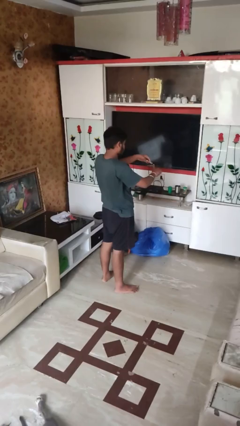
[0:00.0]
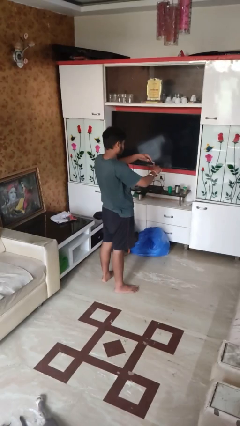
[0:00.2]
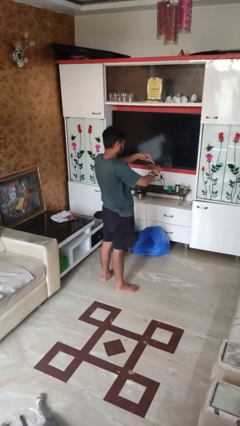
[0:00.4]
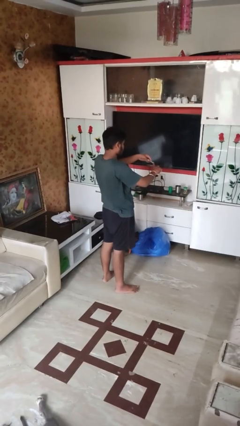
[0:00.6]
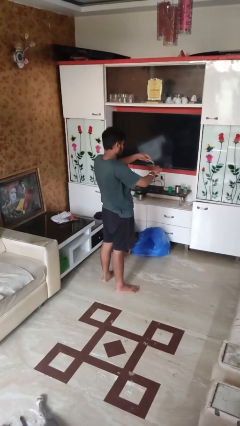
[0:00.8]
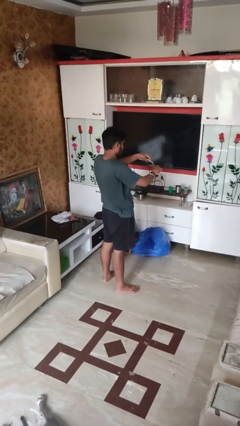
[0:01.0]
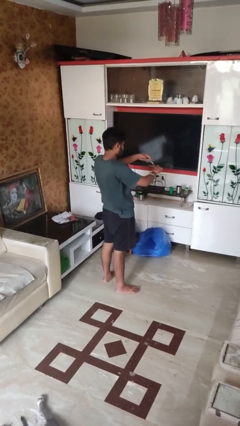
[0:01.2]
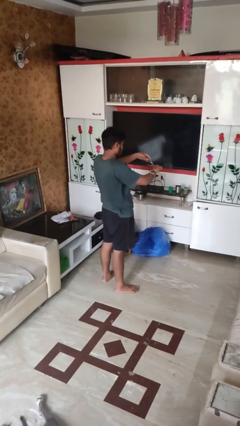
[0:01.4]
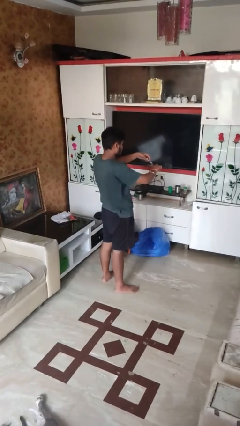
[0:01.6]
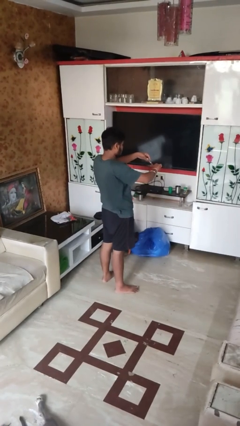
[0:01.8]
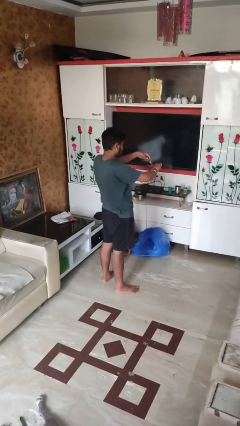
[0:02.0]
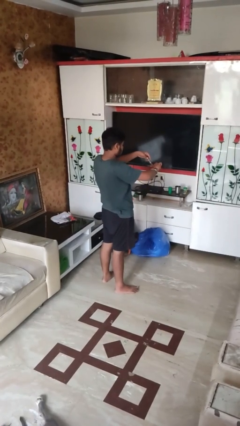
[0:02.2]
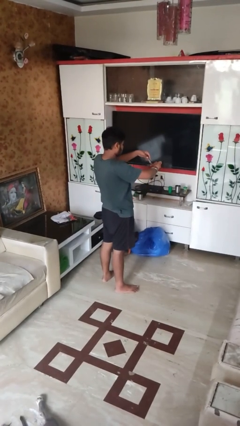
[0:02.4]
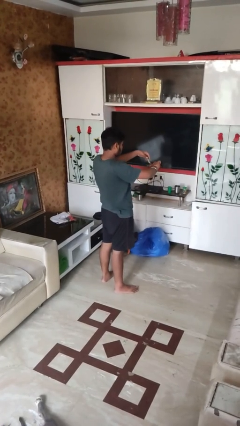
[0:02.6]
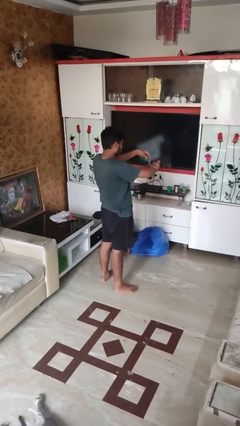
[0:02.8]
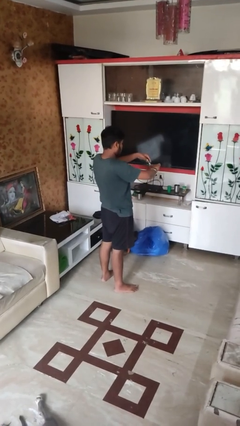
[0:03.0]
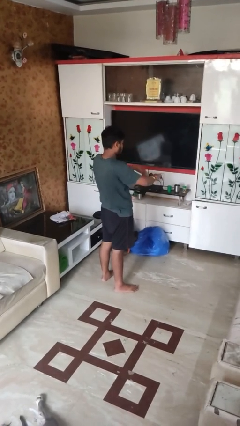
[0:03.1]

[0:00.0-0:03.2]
person clips fingernails

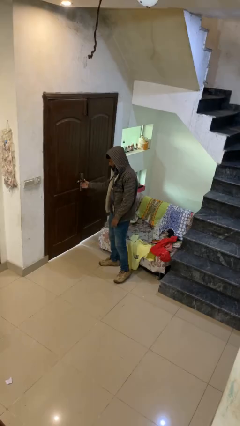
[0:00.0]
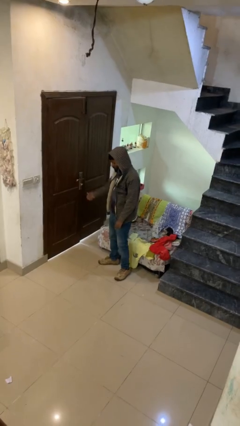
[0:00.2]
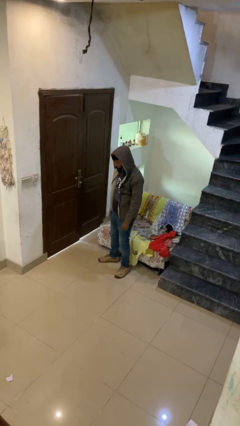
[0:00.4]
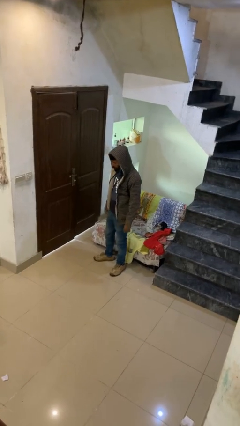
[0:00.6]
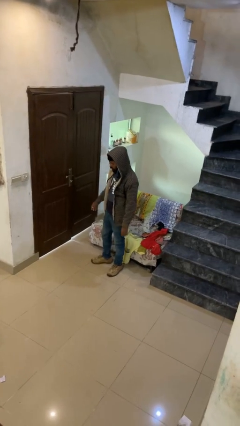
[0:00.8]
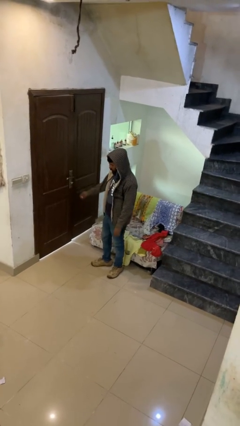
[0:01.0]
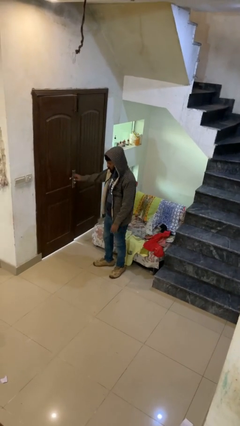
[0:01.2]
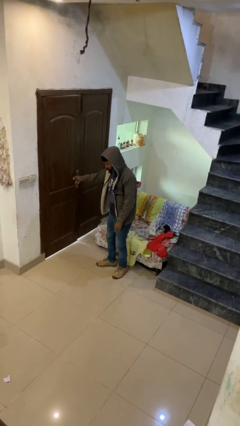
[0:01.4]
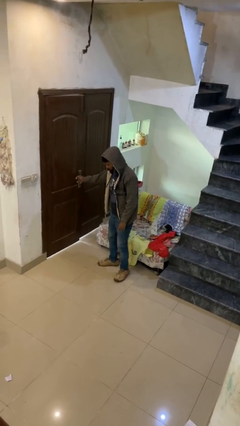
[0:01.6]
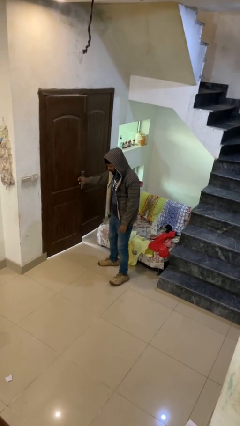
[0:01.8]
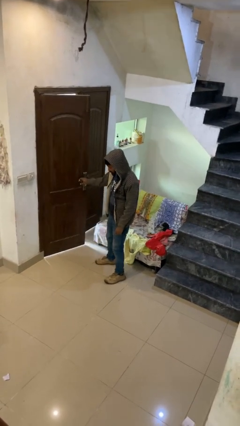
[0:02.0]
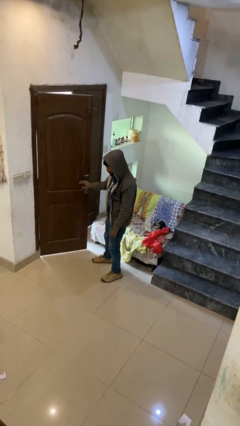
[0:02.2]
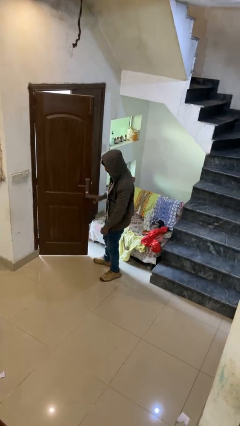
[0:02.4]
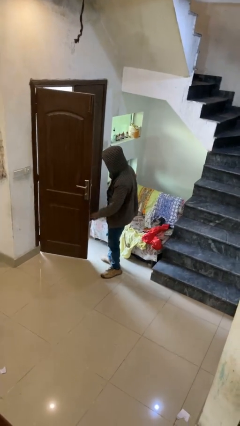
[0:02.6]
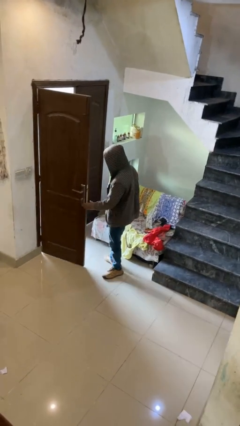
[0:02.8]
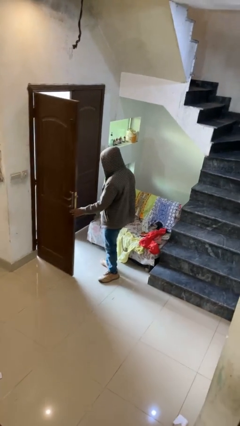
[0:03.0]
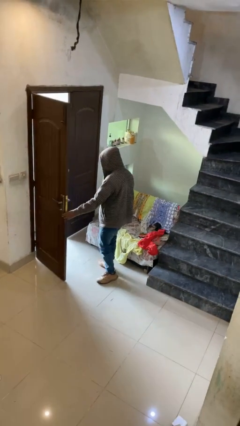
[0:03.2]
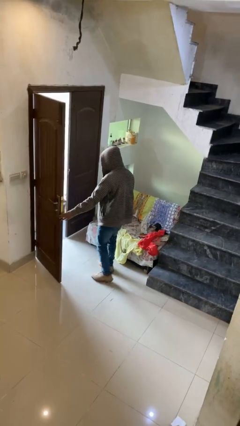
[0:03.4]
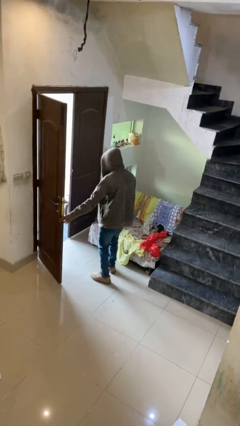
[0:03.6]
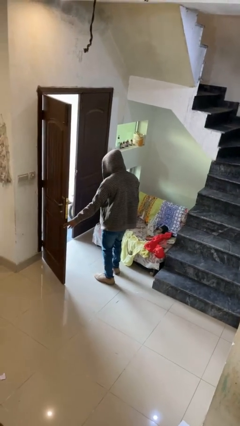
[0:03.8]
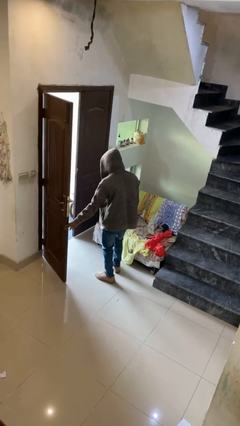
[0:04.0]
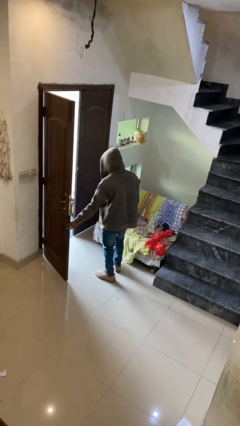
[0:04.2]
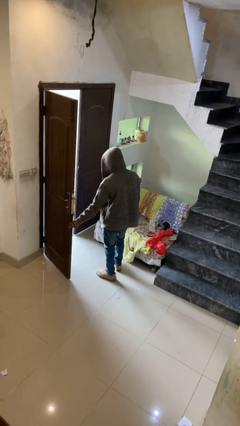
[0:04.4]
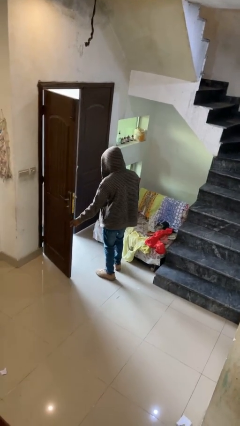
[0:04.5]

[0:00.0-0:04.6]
person opens facility door

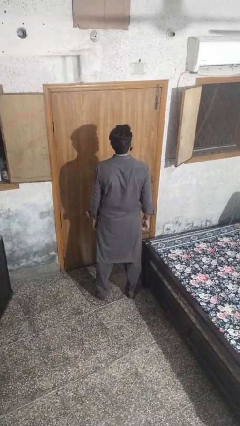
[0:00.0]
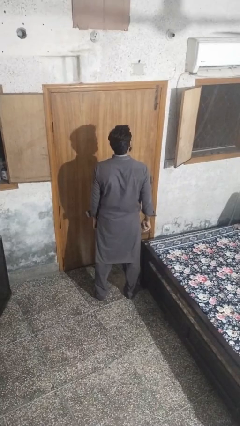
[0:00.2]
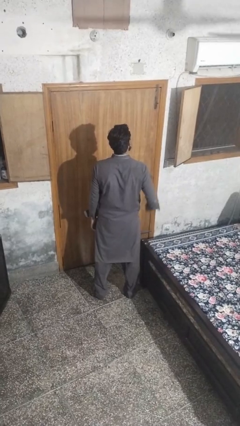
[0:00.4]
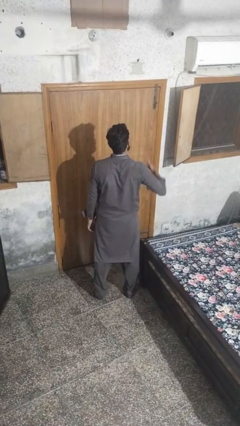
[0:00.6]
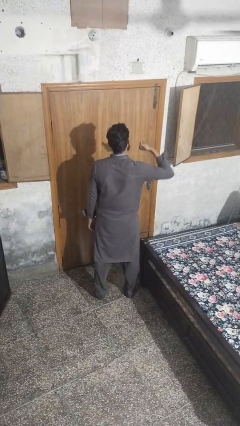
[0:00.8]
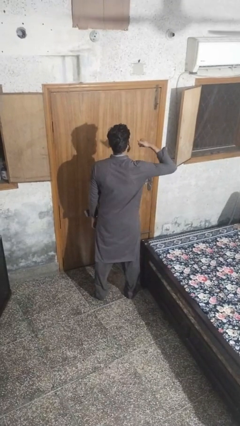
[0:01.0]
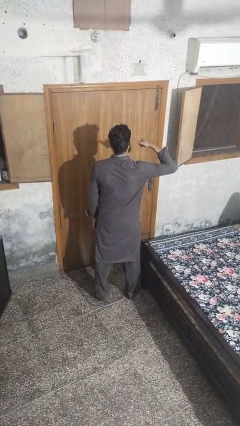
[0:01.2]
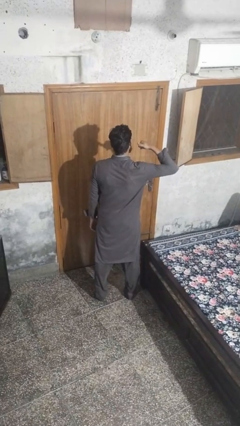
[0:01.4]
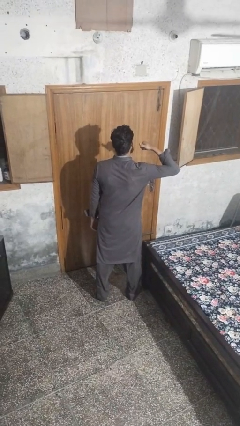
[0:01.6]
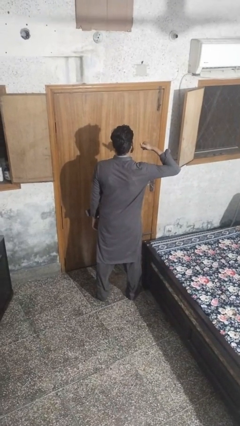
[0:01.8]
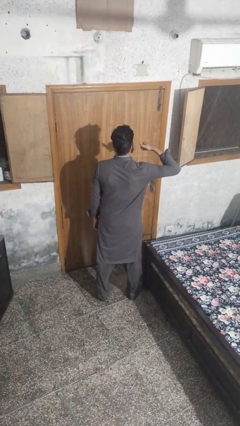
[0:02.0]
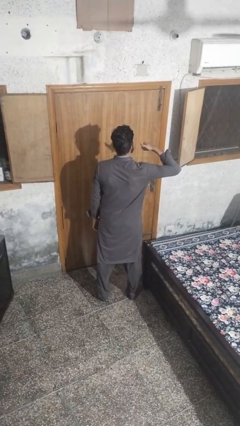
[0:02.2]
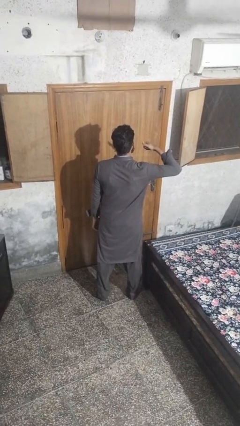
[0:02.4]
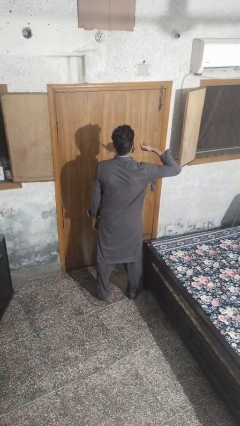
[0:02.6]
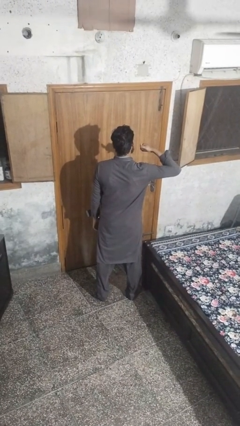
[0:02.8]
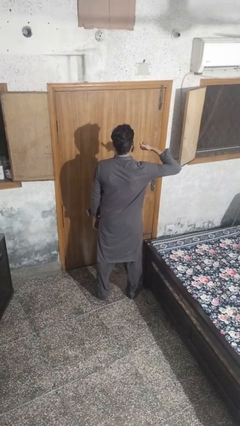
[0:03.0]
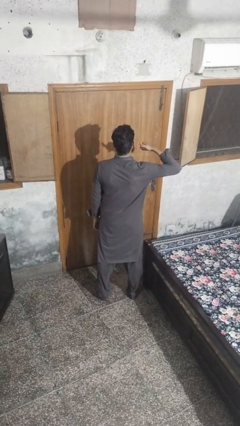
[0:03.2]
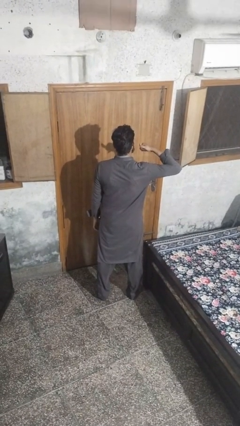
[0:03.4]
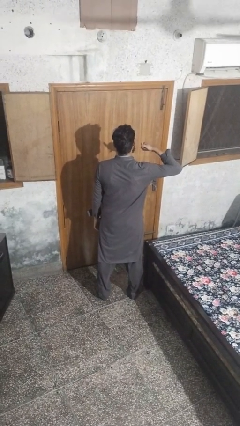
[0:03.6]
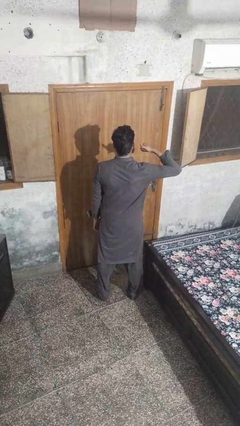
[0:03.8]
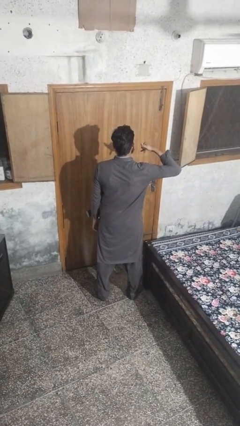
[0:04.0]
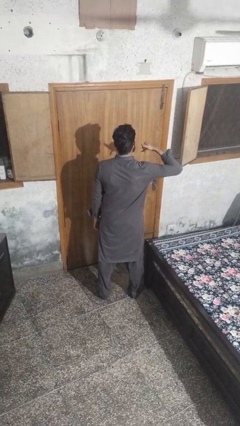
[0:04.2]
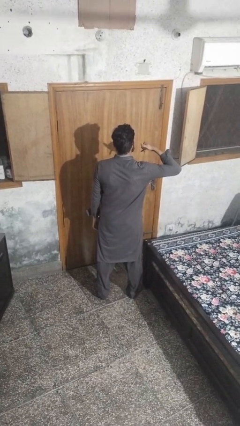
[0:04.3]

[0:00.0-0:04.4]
person gestures call me

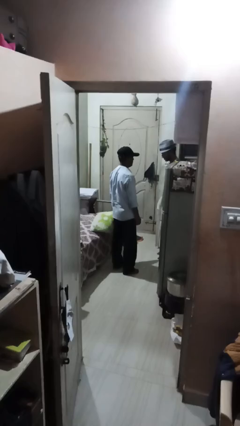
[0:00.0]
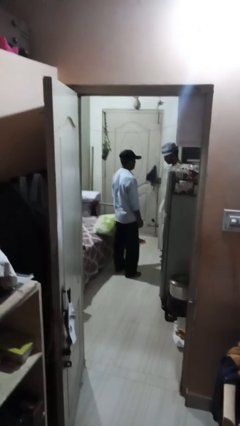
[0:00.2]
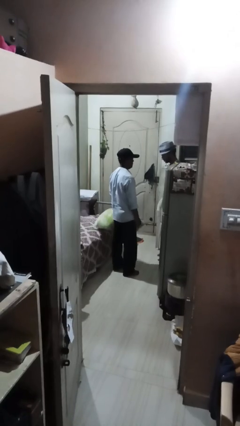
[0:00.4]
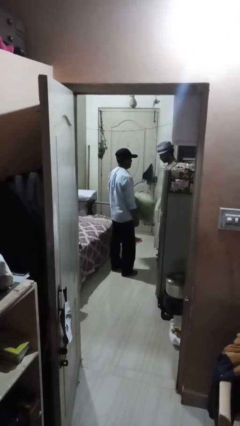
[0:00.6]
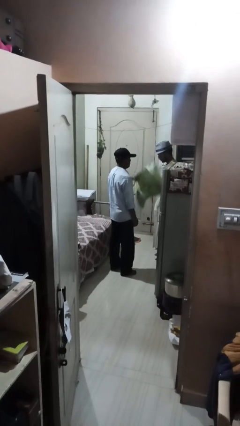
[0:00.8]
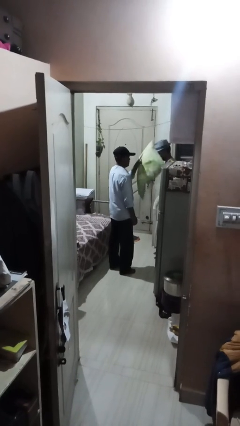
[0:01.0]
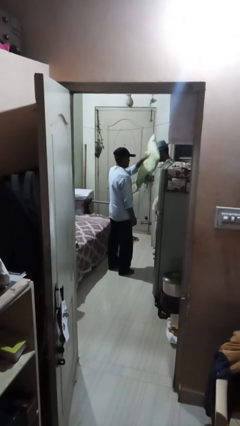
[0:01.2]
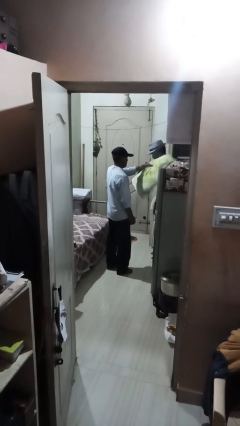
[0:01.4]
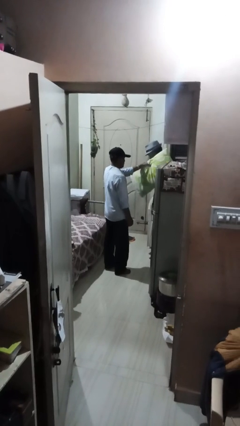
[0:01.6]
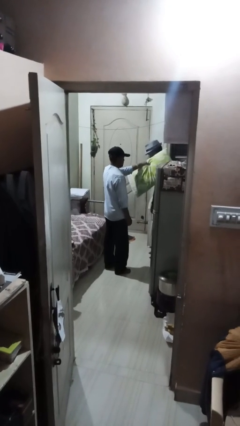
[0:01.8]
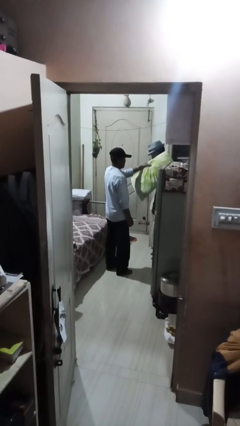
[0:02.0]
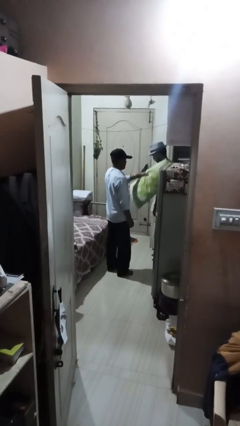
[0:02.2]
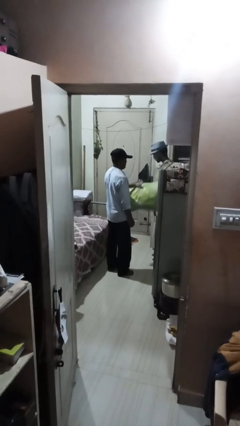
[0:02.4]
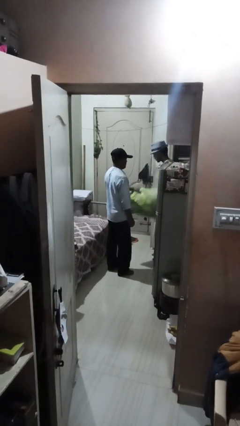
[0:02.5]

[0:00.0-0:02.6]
person hits person with pillow

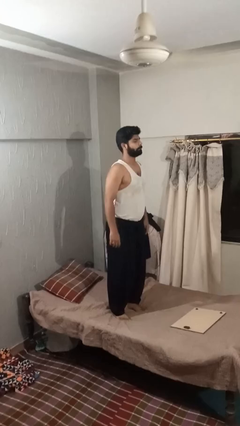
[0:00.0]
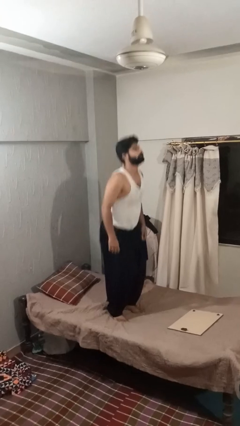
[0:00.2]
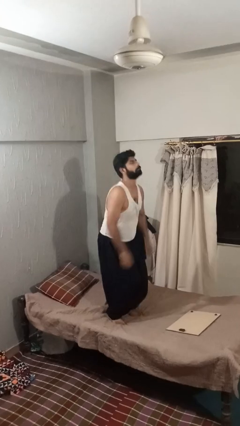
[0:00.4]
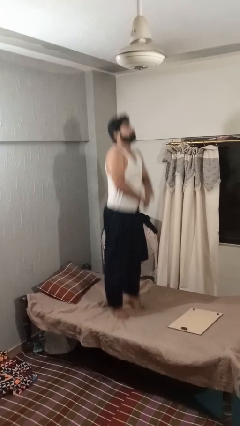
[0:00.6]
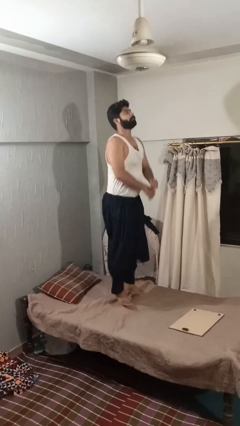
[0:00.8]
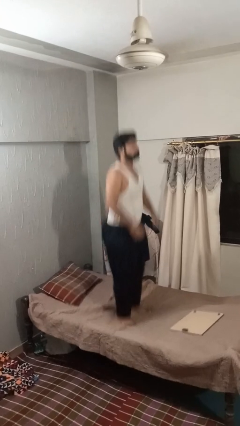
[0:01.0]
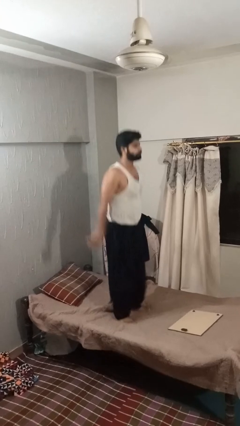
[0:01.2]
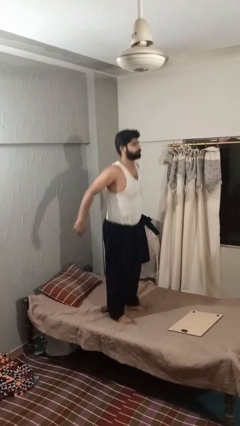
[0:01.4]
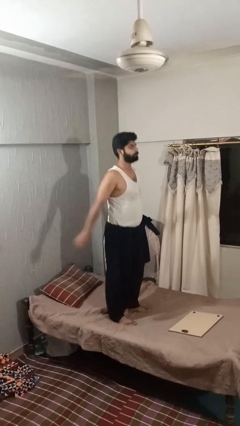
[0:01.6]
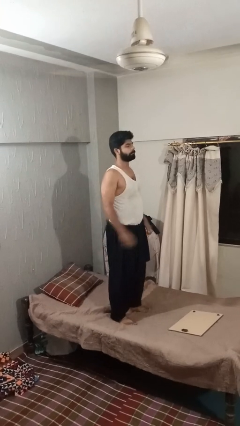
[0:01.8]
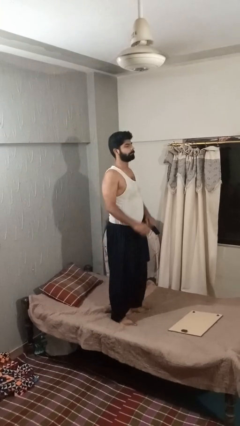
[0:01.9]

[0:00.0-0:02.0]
person jumps on bed

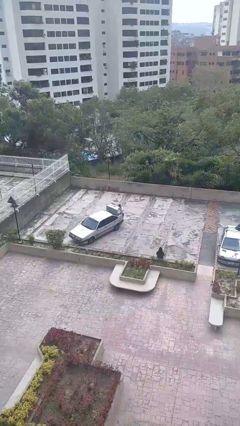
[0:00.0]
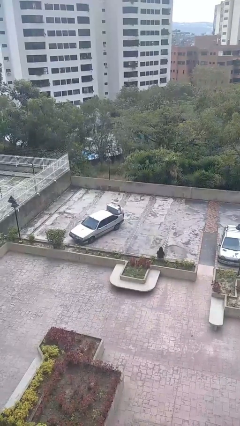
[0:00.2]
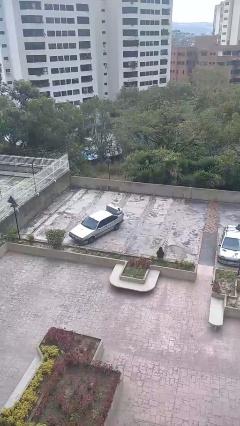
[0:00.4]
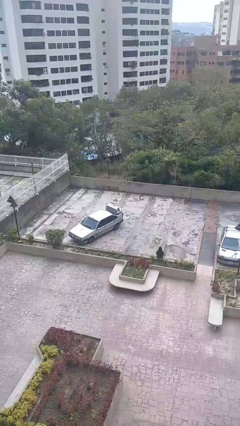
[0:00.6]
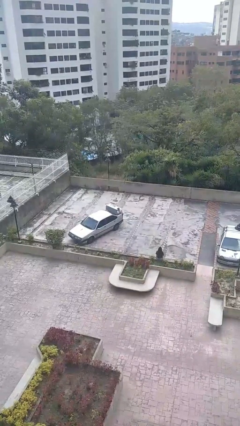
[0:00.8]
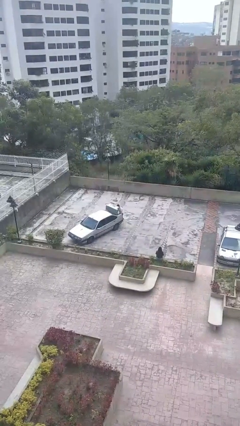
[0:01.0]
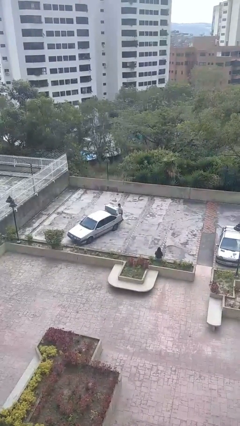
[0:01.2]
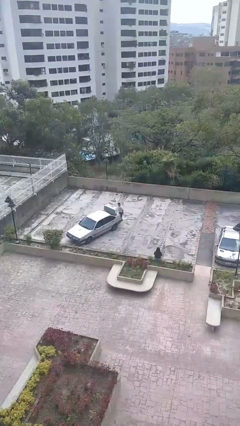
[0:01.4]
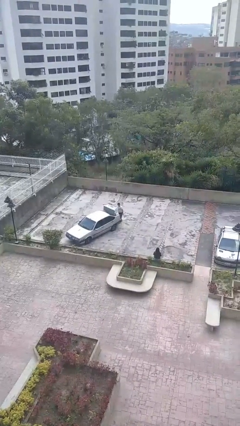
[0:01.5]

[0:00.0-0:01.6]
person loads car
